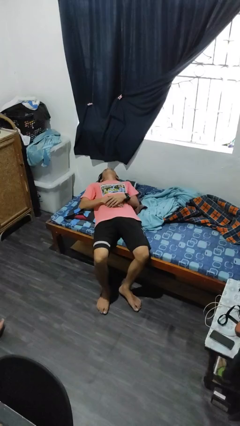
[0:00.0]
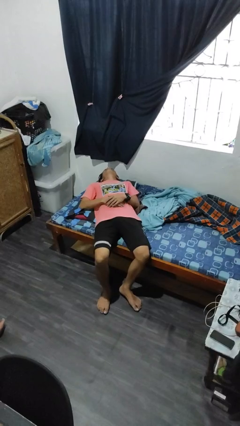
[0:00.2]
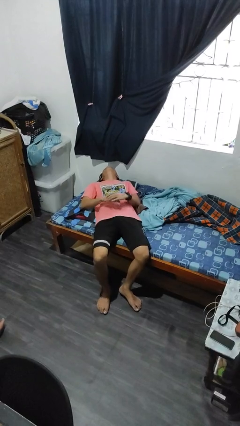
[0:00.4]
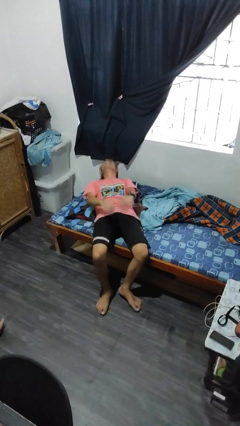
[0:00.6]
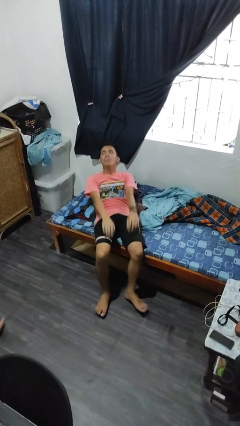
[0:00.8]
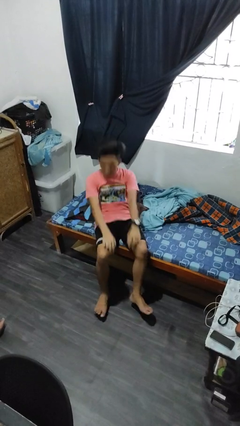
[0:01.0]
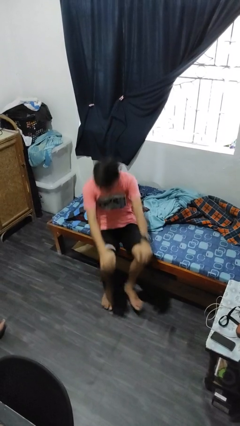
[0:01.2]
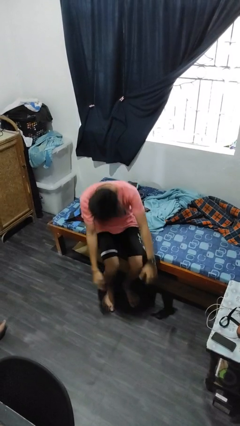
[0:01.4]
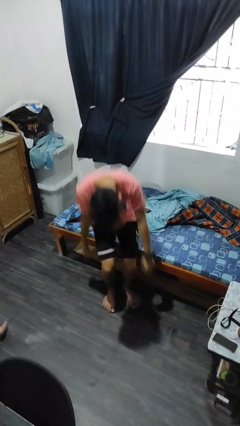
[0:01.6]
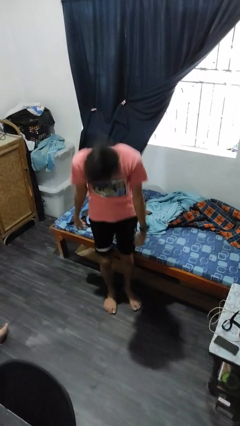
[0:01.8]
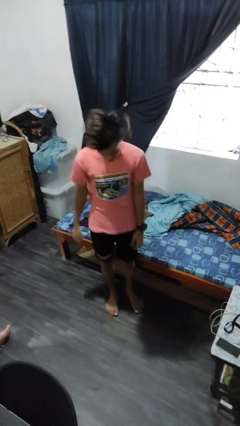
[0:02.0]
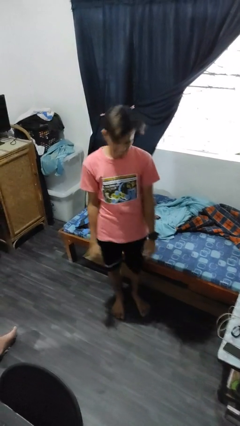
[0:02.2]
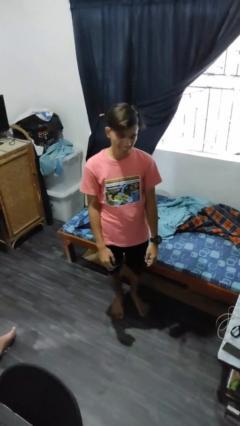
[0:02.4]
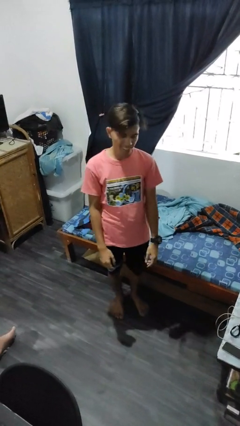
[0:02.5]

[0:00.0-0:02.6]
person stands up

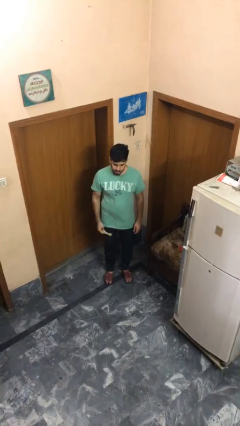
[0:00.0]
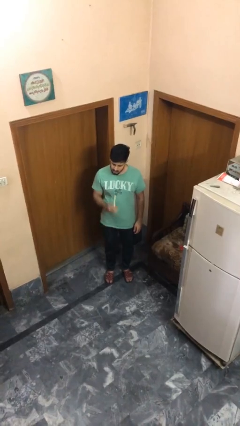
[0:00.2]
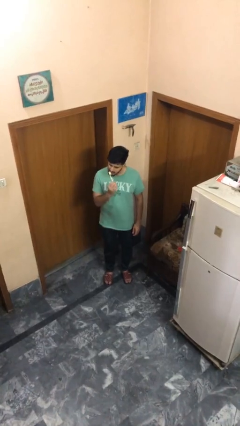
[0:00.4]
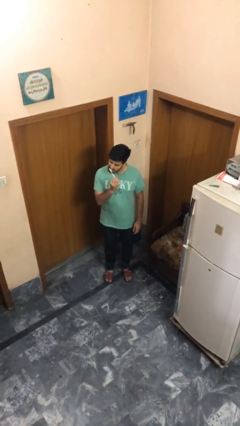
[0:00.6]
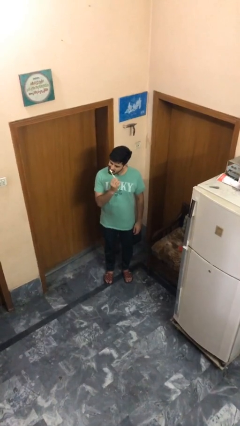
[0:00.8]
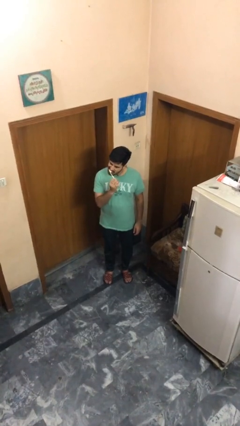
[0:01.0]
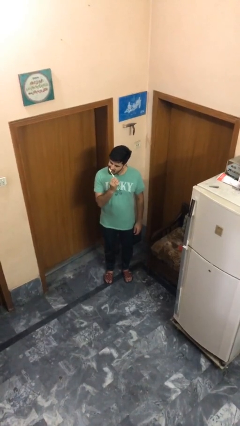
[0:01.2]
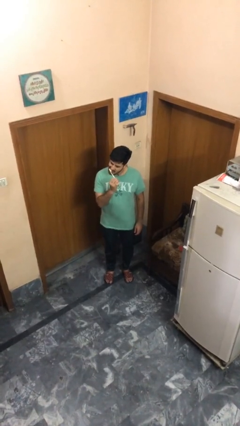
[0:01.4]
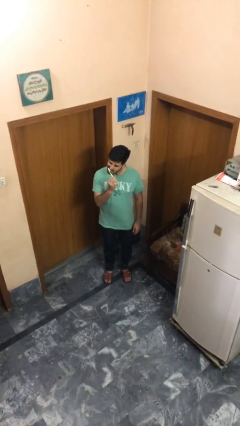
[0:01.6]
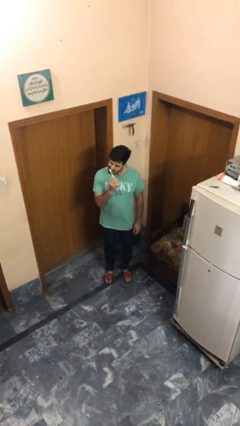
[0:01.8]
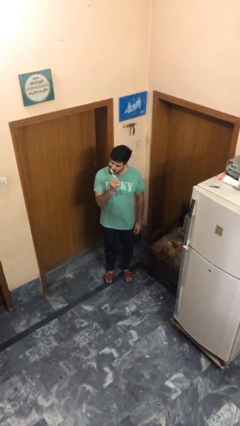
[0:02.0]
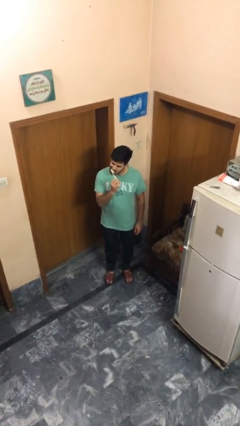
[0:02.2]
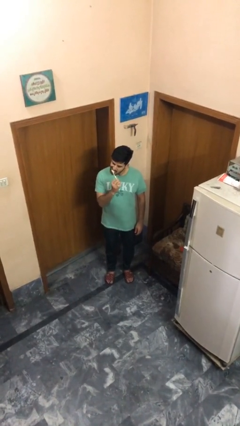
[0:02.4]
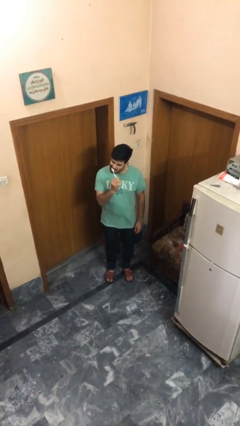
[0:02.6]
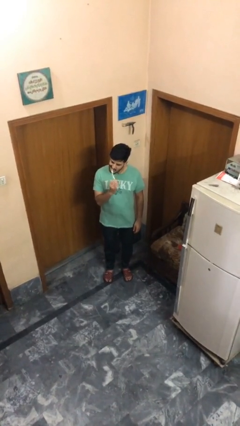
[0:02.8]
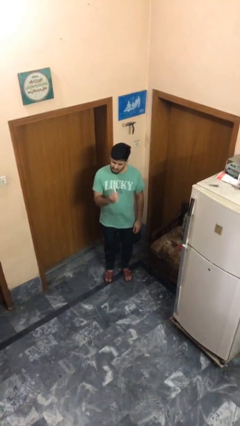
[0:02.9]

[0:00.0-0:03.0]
person brushes teeth

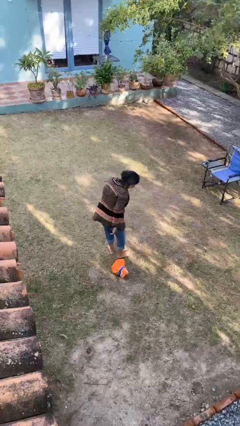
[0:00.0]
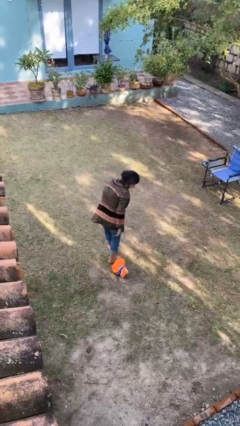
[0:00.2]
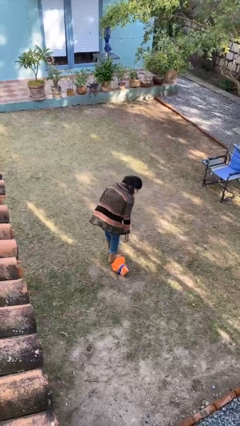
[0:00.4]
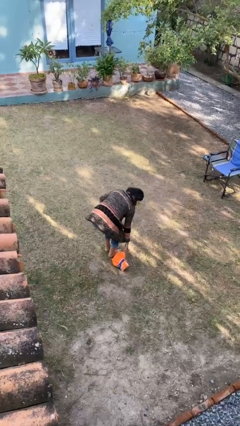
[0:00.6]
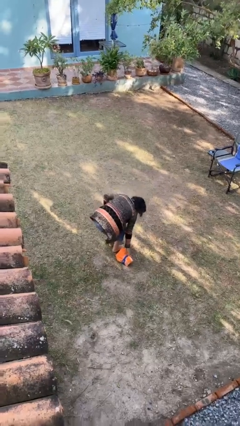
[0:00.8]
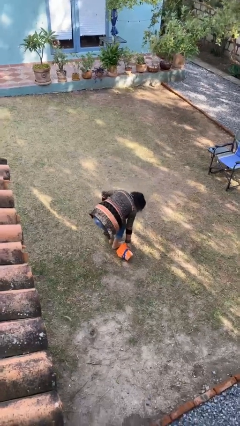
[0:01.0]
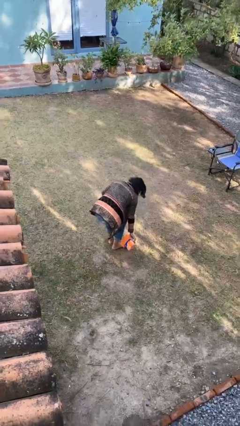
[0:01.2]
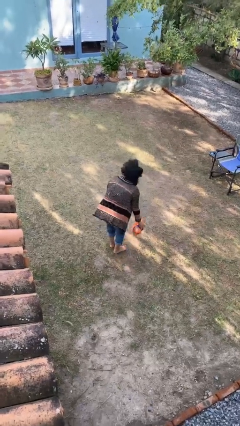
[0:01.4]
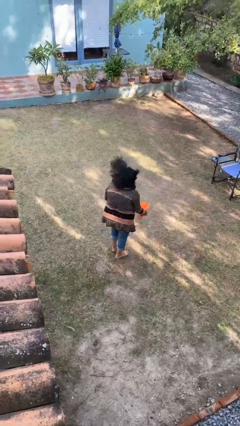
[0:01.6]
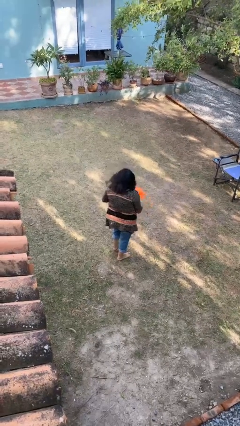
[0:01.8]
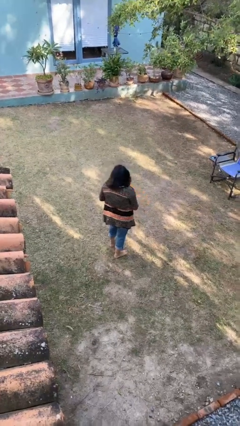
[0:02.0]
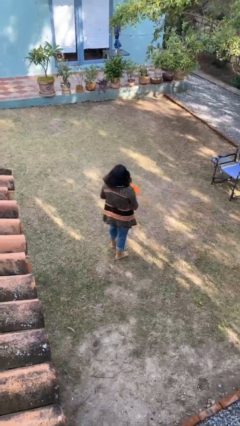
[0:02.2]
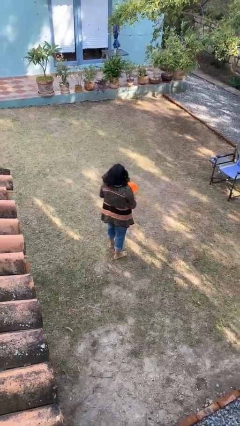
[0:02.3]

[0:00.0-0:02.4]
person picks up object from floor

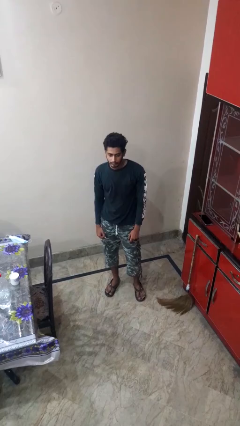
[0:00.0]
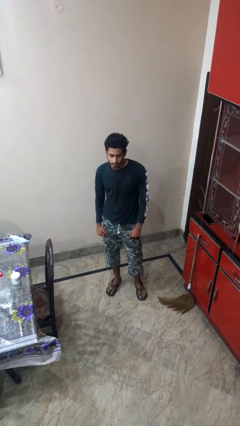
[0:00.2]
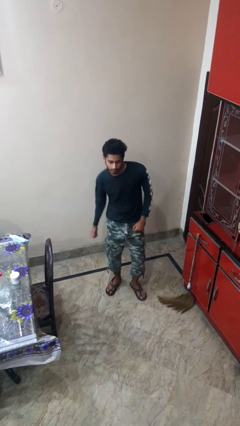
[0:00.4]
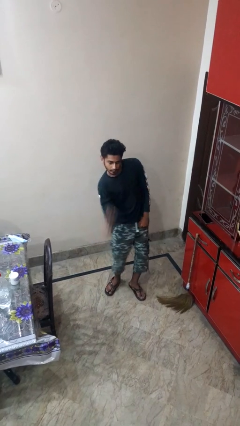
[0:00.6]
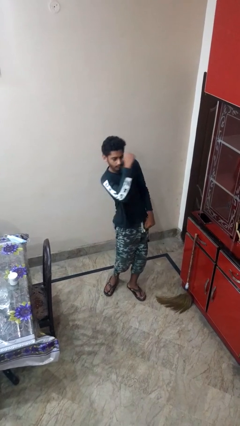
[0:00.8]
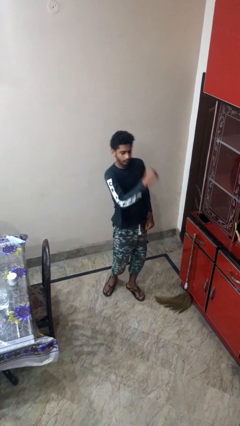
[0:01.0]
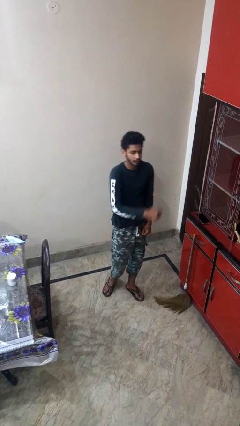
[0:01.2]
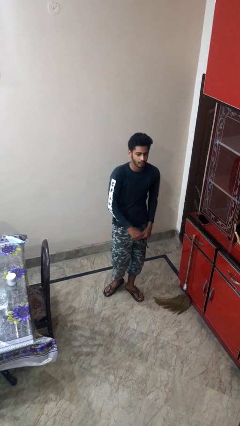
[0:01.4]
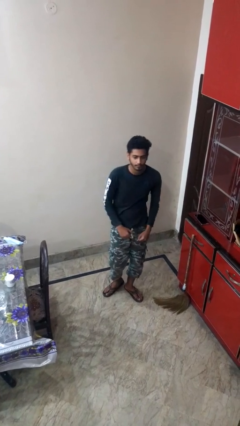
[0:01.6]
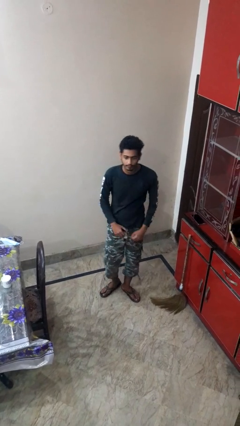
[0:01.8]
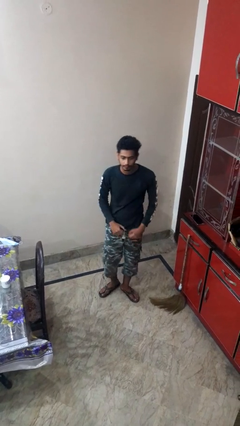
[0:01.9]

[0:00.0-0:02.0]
person punches

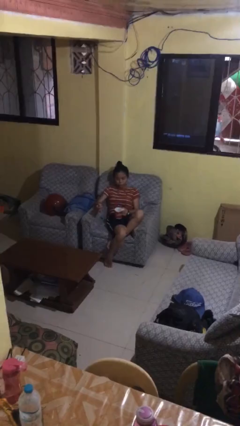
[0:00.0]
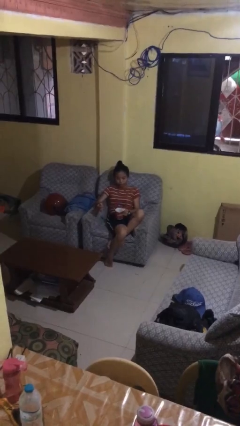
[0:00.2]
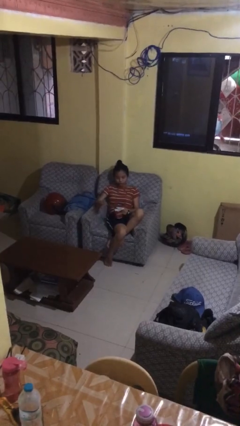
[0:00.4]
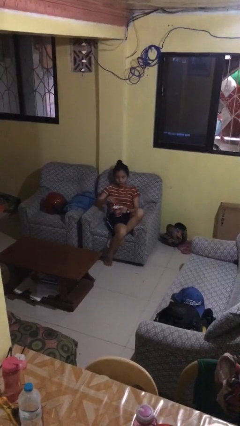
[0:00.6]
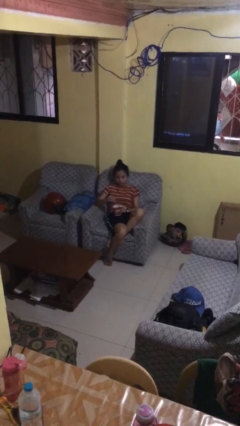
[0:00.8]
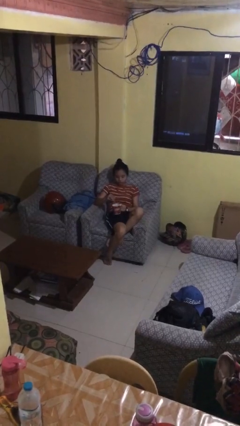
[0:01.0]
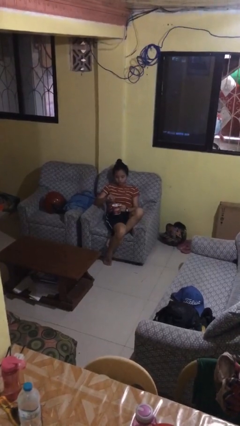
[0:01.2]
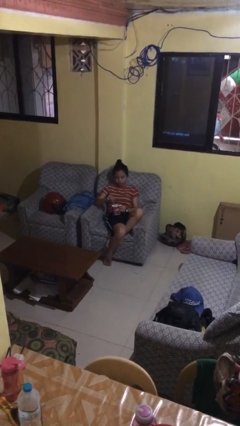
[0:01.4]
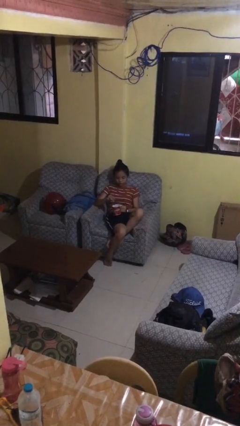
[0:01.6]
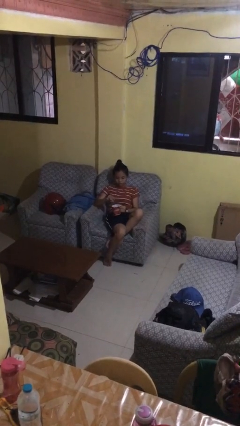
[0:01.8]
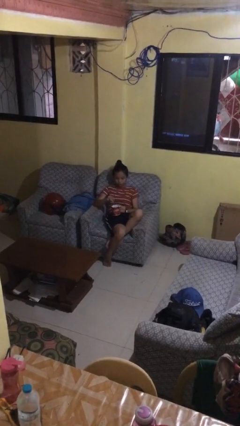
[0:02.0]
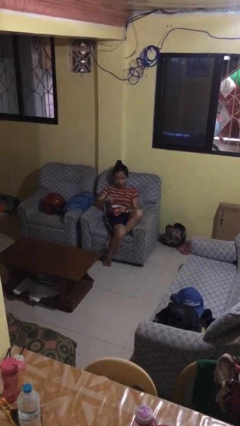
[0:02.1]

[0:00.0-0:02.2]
person stirs mug

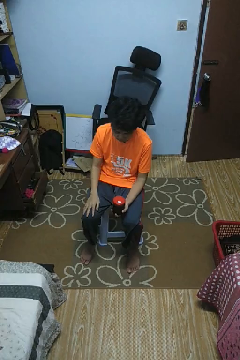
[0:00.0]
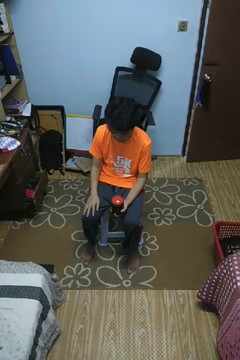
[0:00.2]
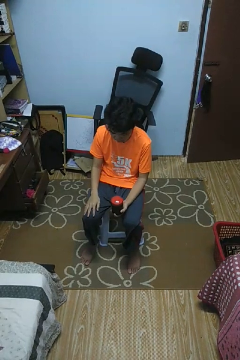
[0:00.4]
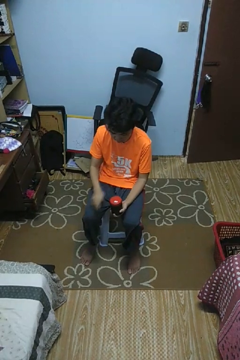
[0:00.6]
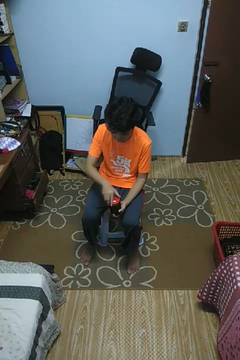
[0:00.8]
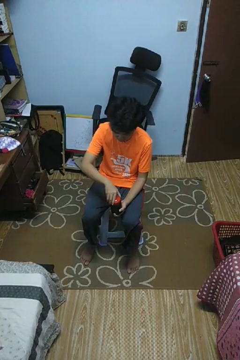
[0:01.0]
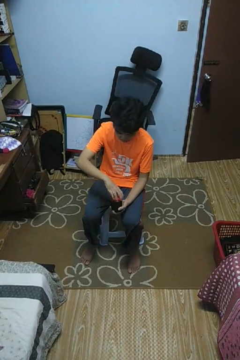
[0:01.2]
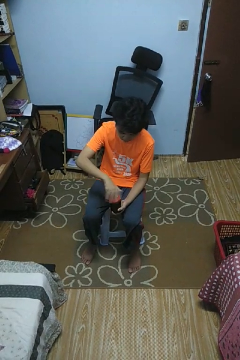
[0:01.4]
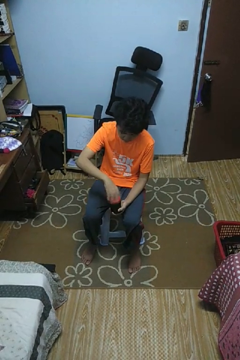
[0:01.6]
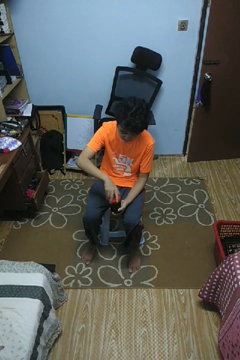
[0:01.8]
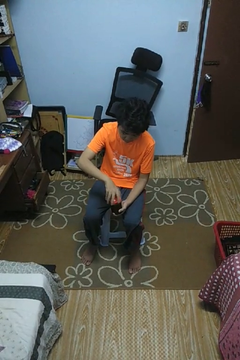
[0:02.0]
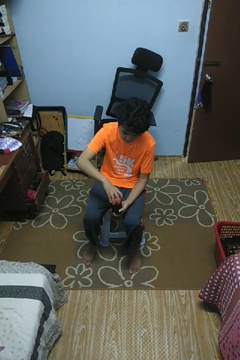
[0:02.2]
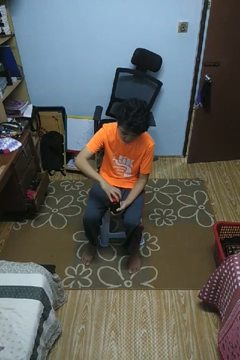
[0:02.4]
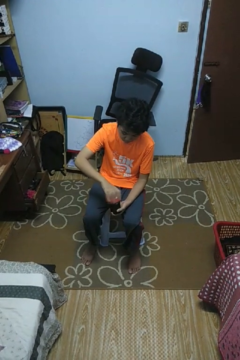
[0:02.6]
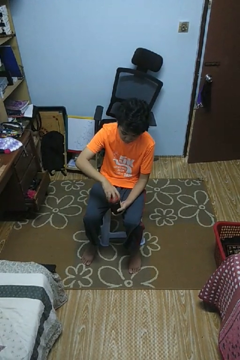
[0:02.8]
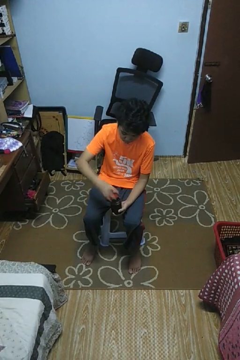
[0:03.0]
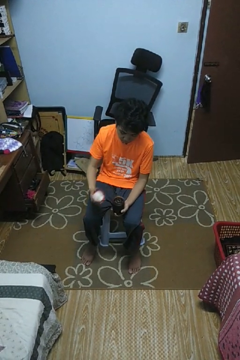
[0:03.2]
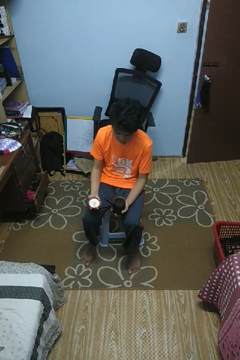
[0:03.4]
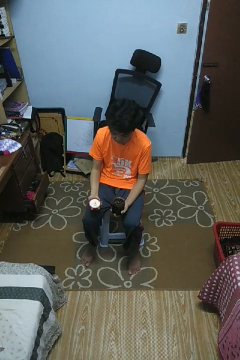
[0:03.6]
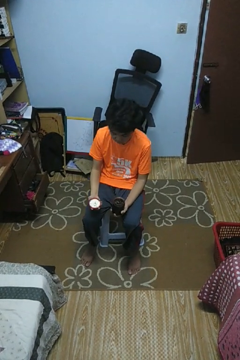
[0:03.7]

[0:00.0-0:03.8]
person opens jar

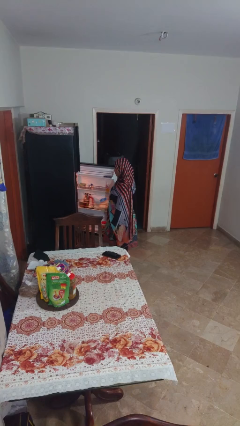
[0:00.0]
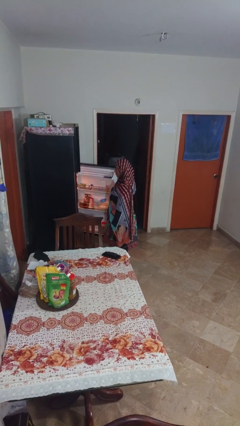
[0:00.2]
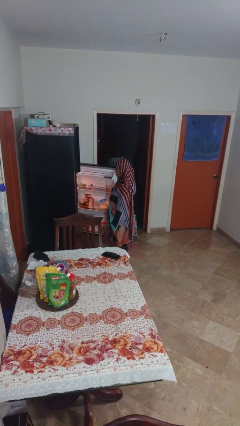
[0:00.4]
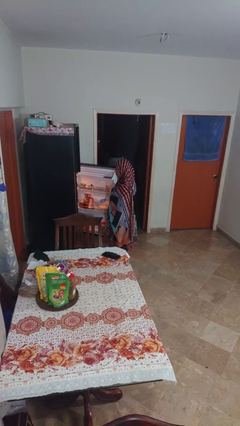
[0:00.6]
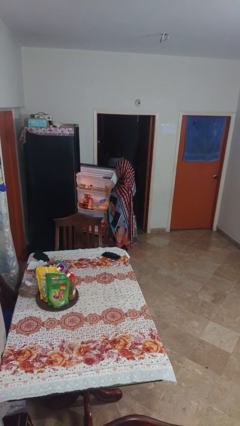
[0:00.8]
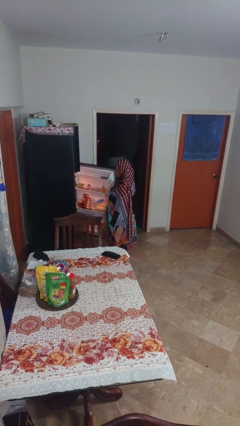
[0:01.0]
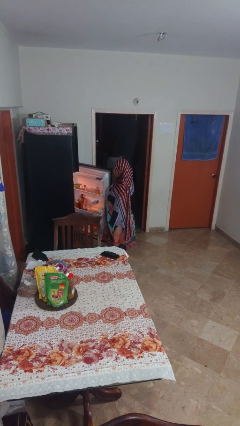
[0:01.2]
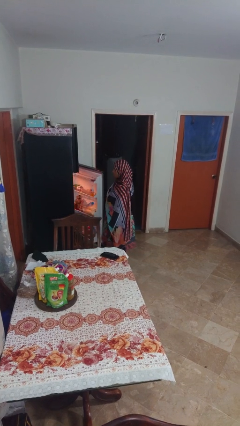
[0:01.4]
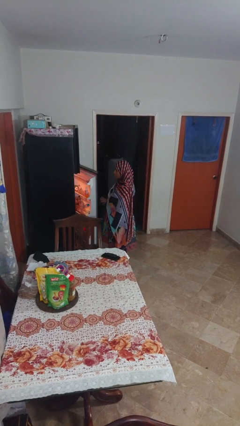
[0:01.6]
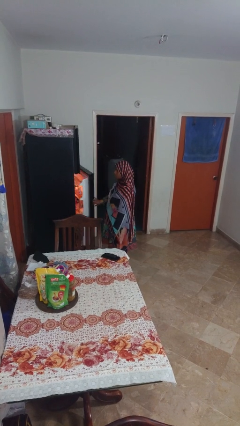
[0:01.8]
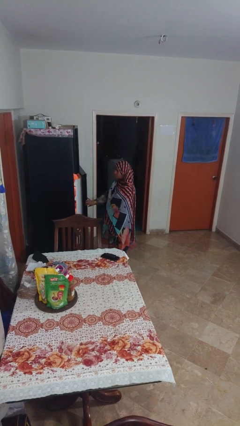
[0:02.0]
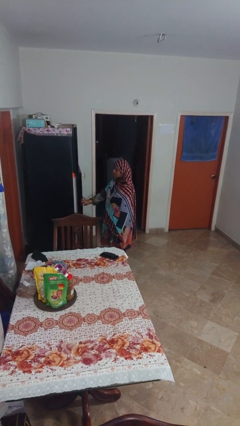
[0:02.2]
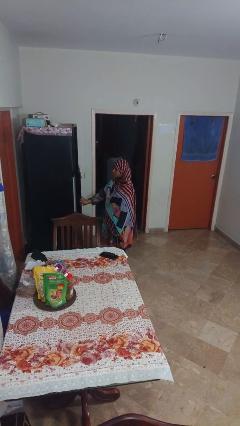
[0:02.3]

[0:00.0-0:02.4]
person closes refrigerator
